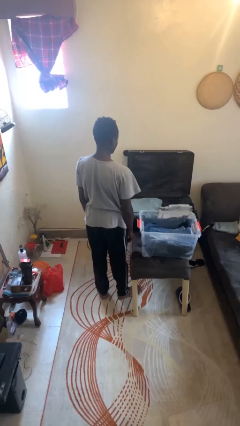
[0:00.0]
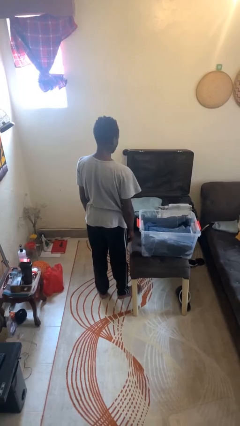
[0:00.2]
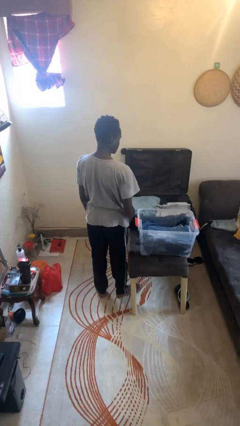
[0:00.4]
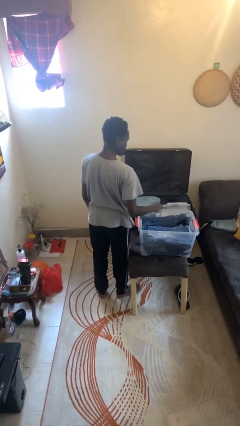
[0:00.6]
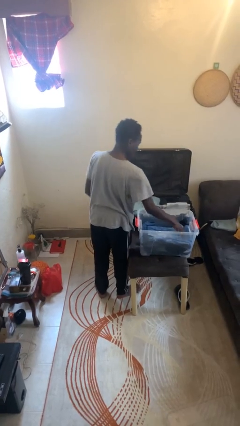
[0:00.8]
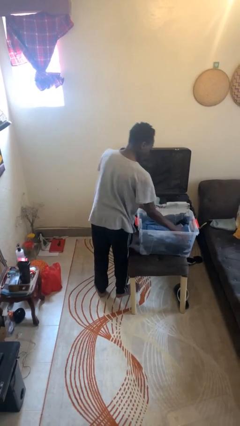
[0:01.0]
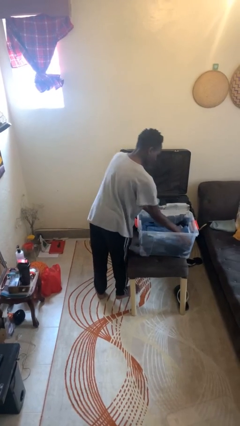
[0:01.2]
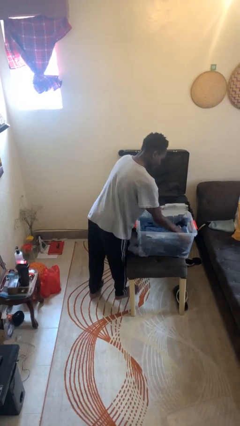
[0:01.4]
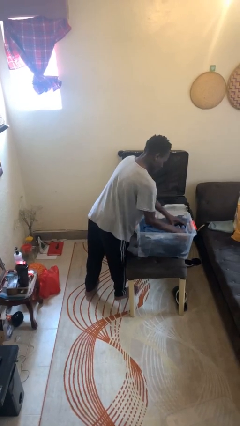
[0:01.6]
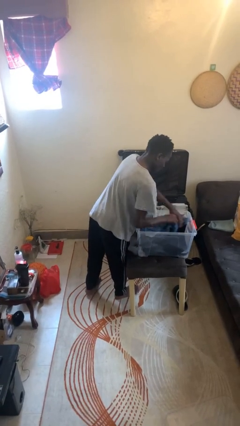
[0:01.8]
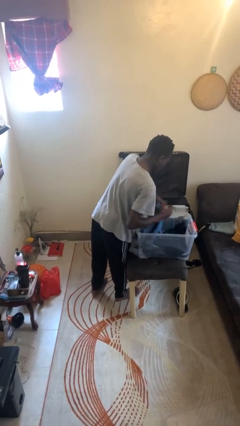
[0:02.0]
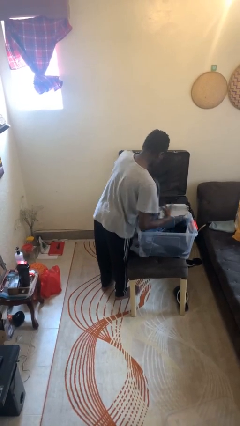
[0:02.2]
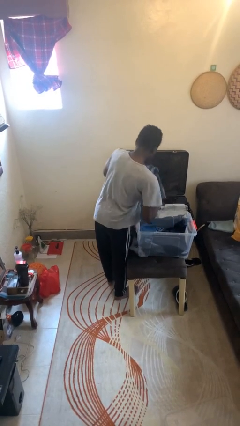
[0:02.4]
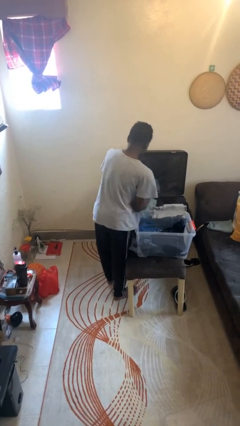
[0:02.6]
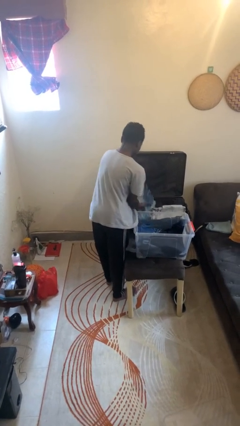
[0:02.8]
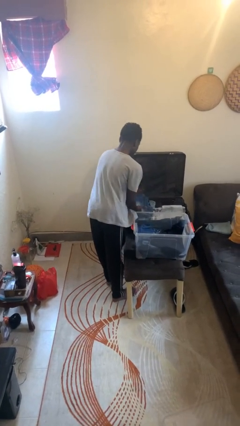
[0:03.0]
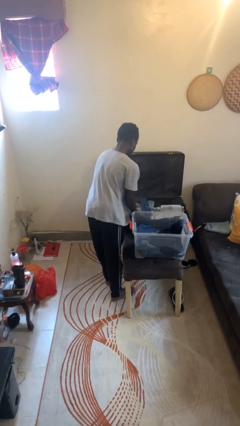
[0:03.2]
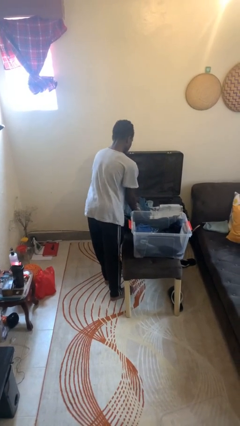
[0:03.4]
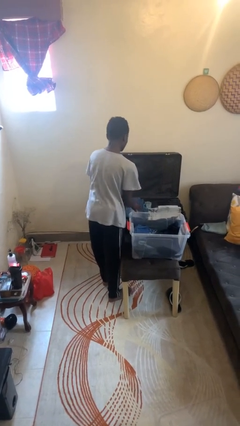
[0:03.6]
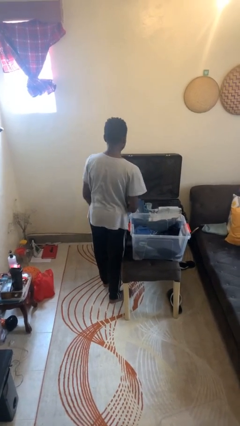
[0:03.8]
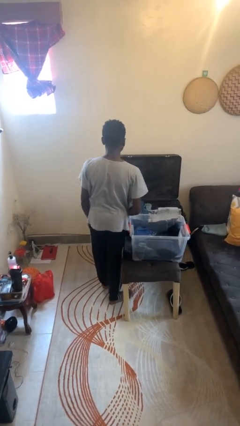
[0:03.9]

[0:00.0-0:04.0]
person loads clothes into suitcase

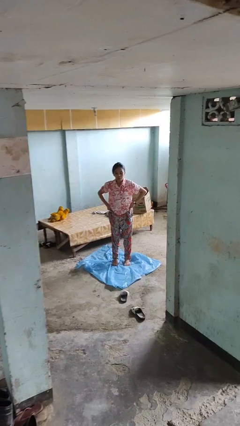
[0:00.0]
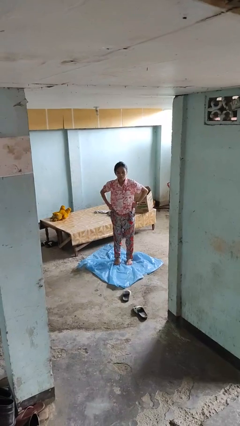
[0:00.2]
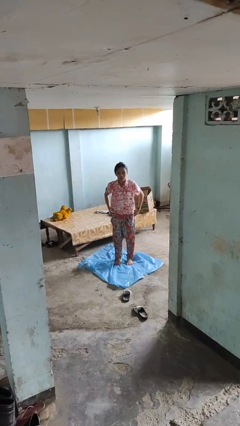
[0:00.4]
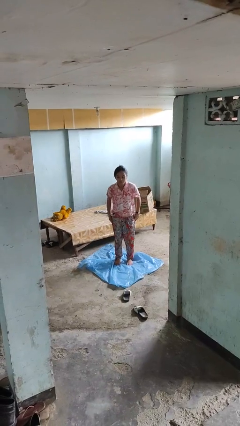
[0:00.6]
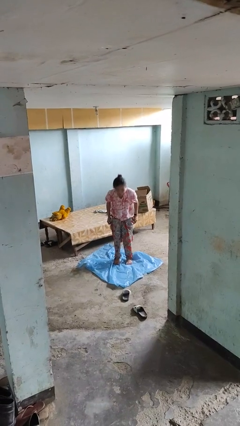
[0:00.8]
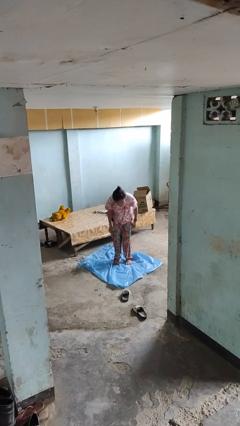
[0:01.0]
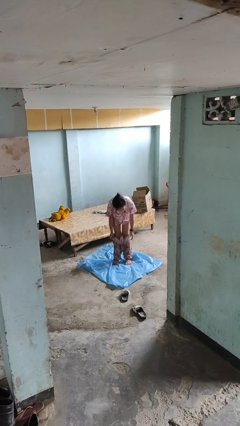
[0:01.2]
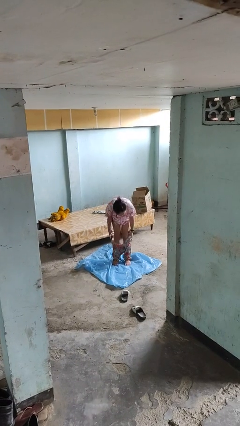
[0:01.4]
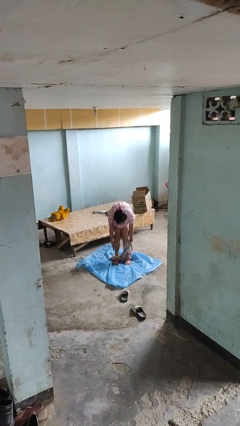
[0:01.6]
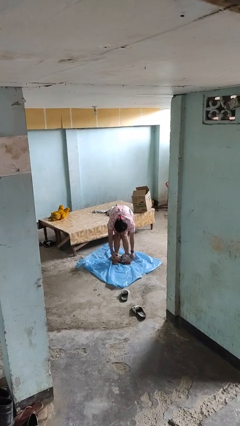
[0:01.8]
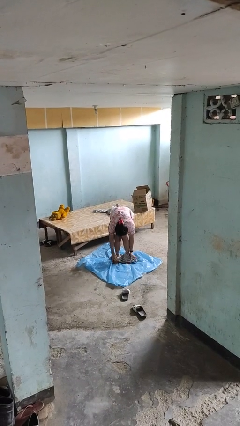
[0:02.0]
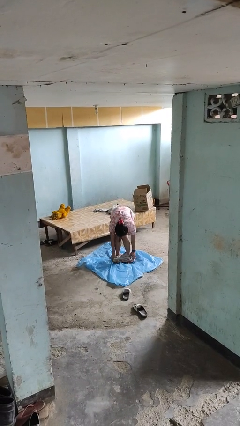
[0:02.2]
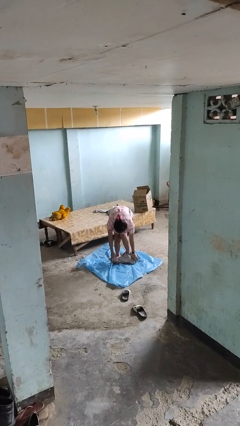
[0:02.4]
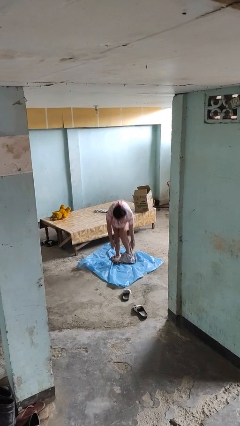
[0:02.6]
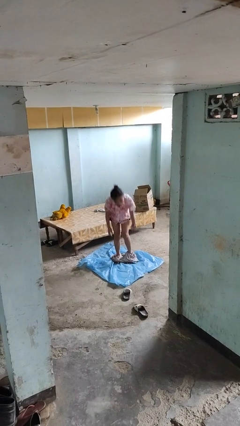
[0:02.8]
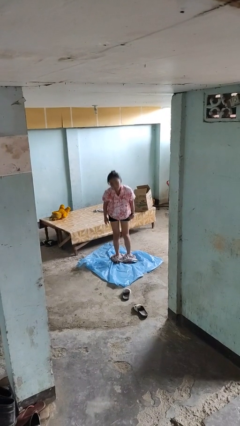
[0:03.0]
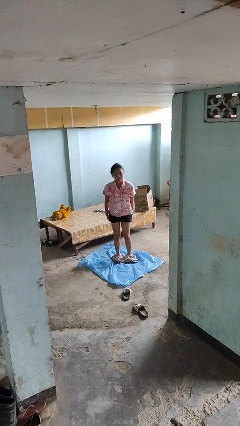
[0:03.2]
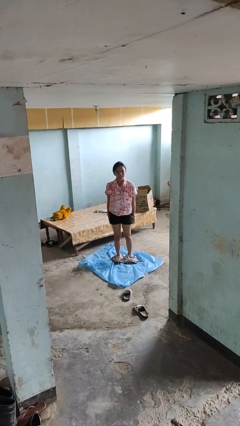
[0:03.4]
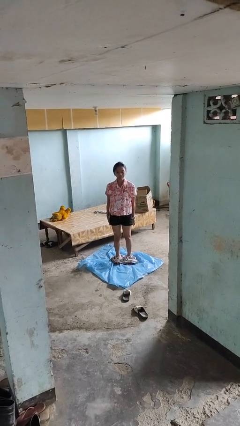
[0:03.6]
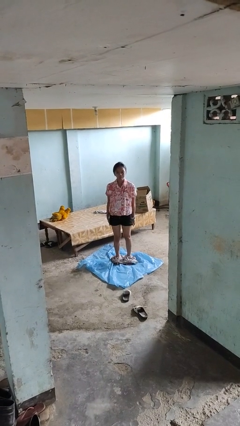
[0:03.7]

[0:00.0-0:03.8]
person takes off pants

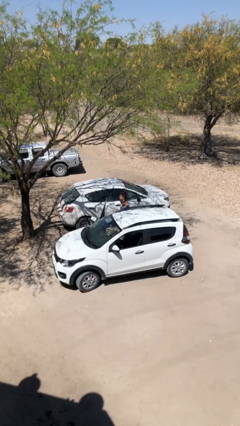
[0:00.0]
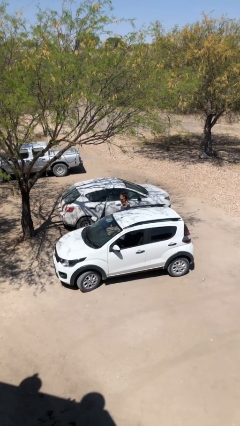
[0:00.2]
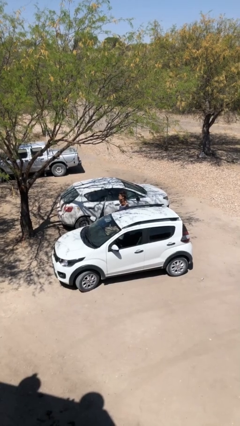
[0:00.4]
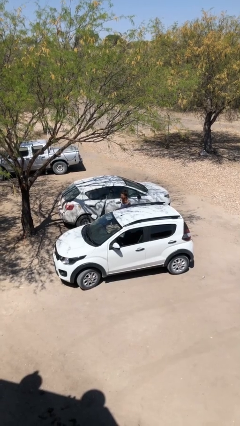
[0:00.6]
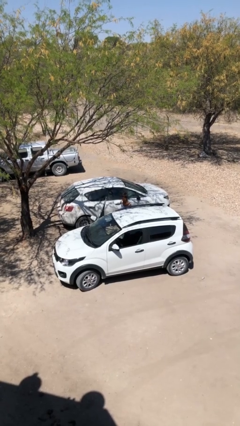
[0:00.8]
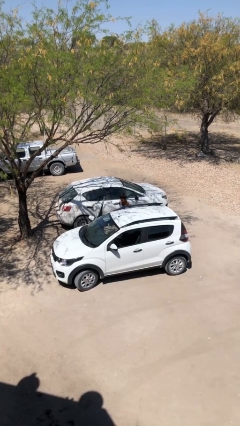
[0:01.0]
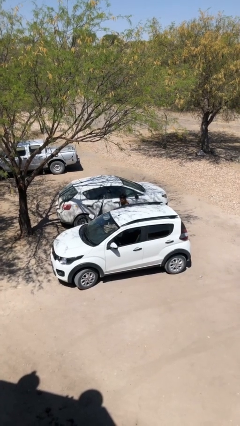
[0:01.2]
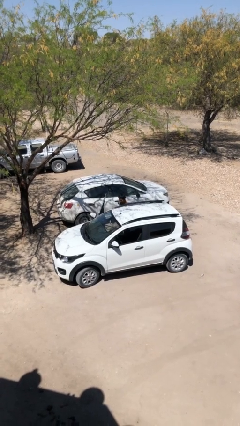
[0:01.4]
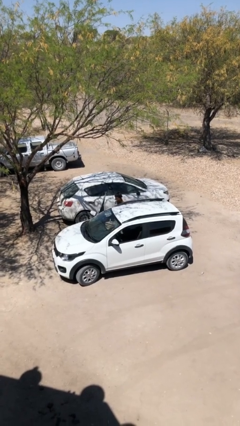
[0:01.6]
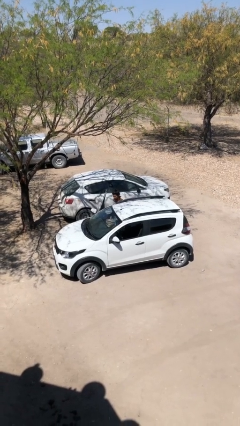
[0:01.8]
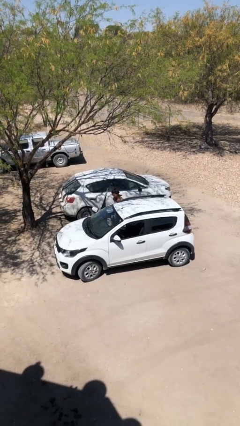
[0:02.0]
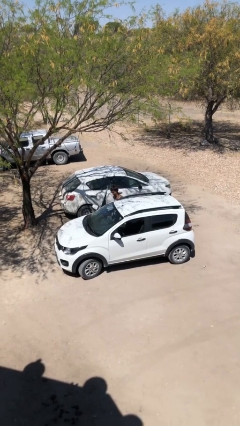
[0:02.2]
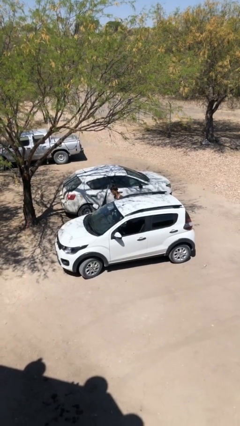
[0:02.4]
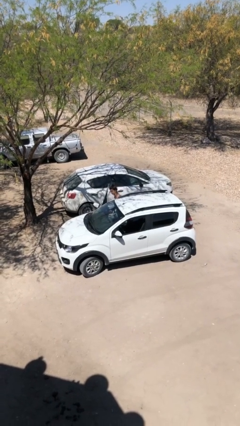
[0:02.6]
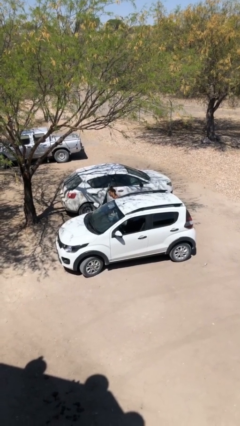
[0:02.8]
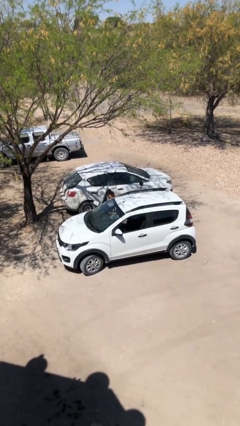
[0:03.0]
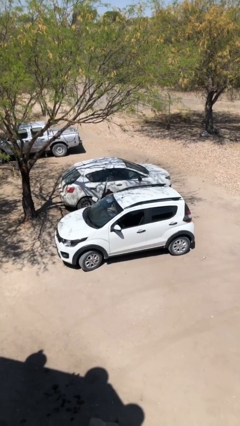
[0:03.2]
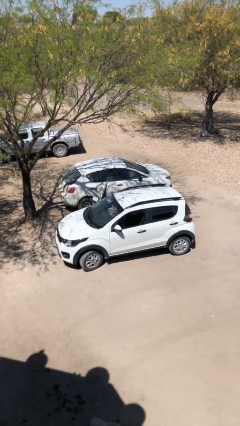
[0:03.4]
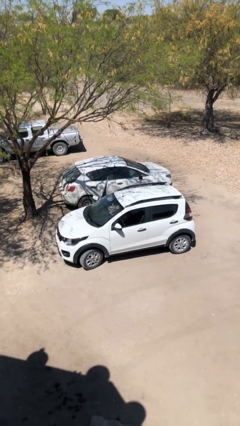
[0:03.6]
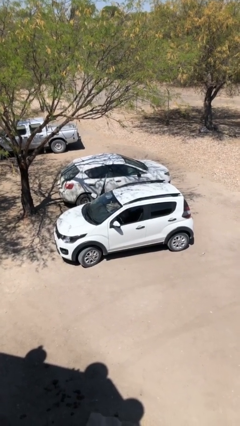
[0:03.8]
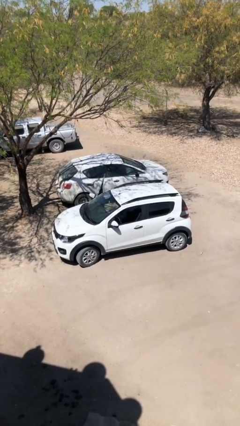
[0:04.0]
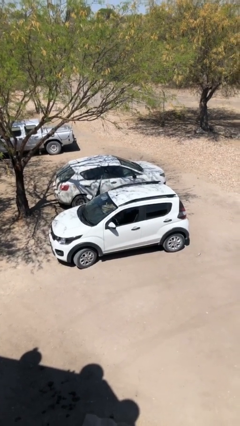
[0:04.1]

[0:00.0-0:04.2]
person enters car

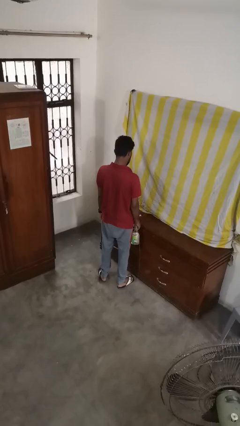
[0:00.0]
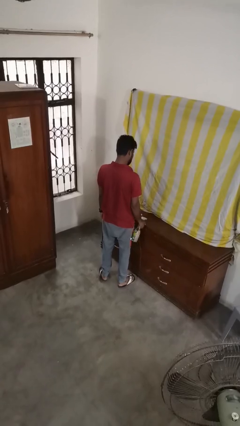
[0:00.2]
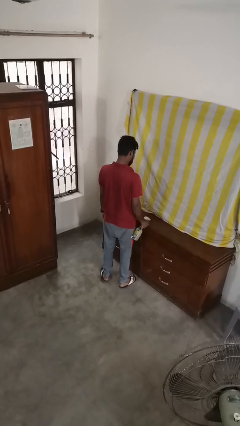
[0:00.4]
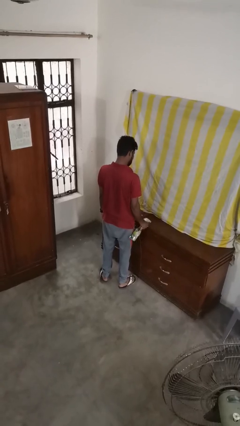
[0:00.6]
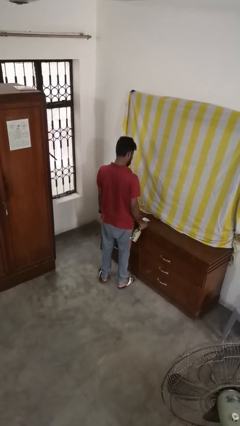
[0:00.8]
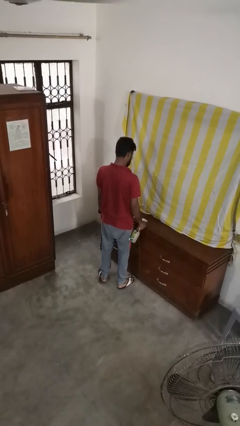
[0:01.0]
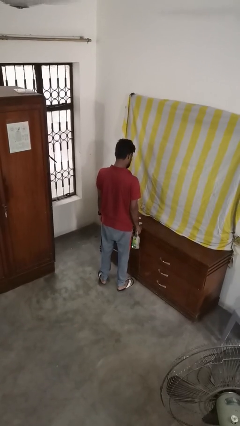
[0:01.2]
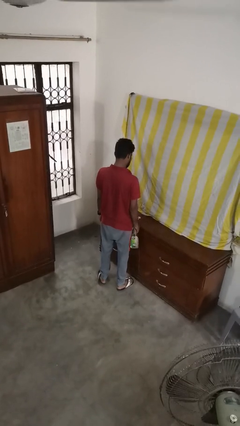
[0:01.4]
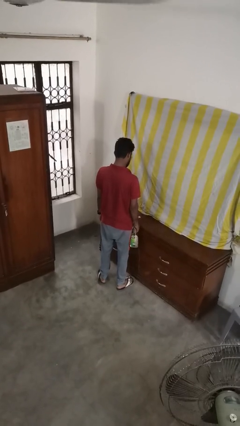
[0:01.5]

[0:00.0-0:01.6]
person sprays from bottle

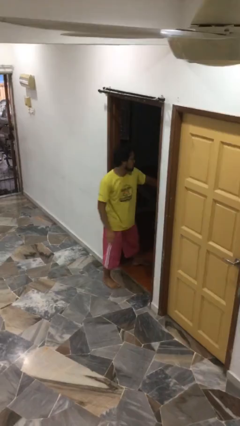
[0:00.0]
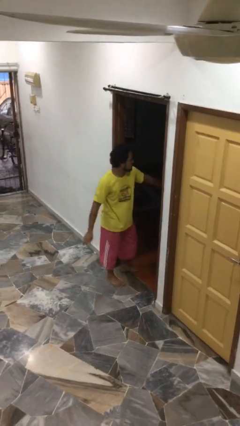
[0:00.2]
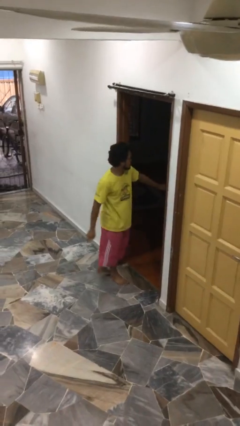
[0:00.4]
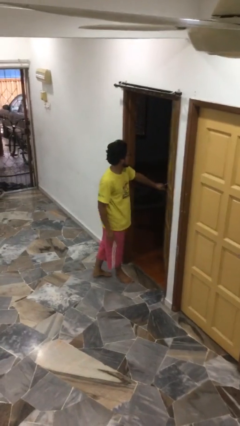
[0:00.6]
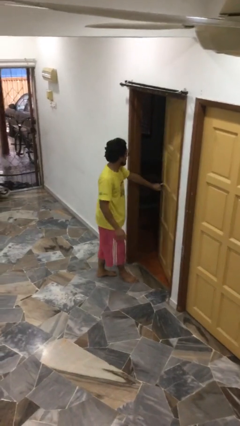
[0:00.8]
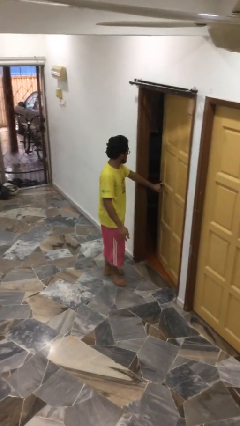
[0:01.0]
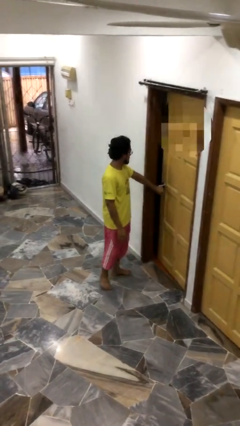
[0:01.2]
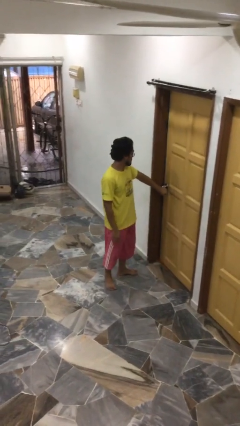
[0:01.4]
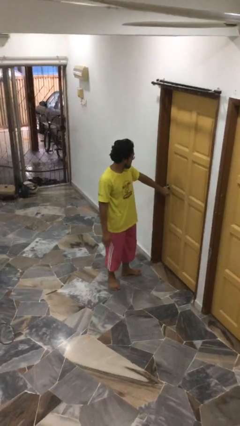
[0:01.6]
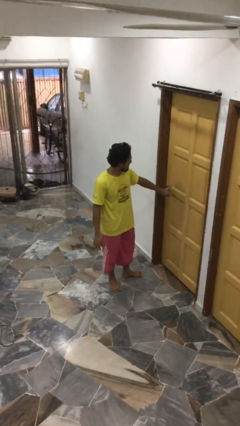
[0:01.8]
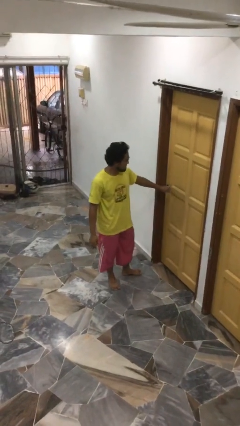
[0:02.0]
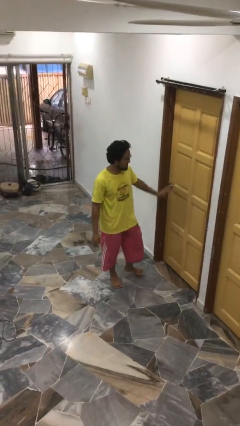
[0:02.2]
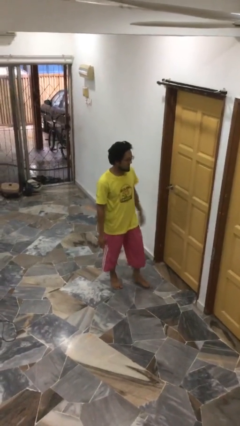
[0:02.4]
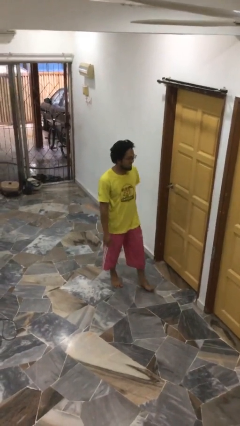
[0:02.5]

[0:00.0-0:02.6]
person closes facility door

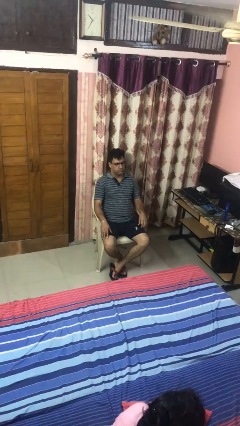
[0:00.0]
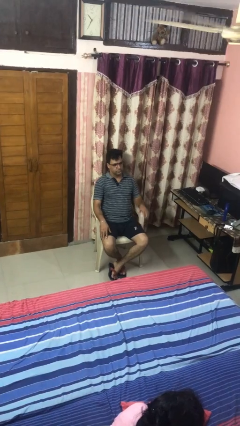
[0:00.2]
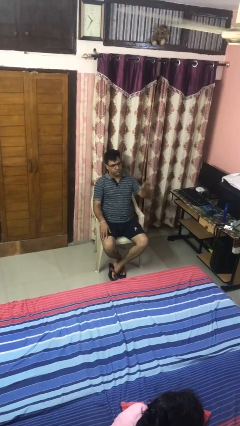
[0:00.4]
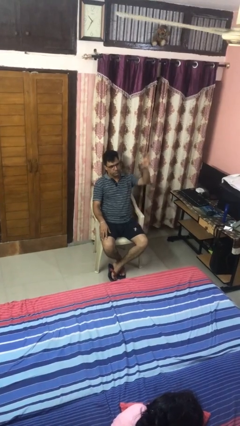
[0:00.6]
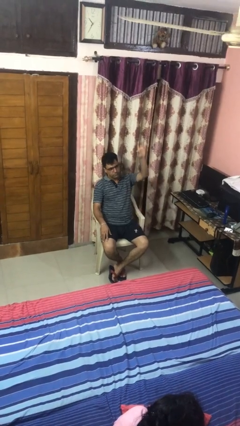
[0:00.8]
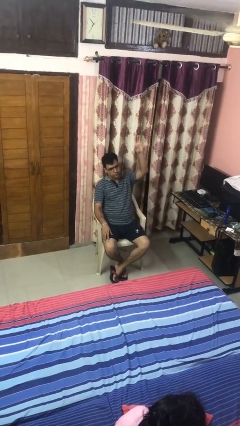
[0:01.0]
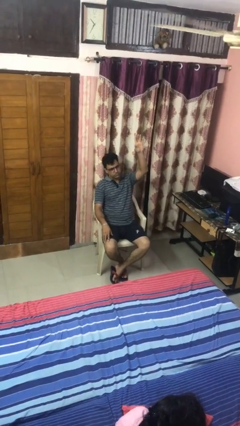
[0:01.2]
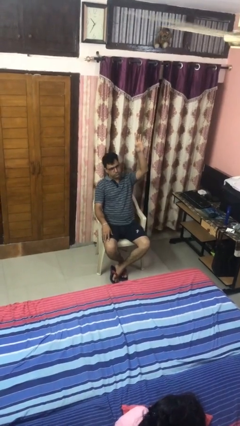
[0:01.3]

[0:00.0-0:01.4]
person gestures raise hand
